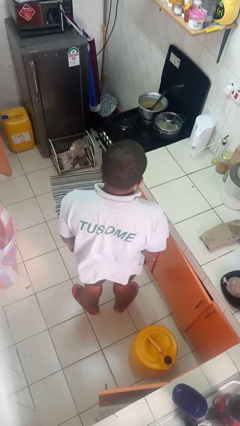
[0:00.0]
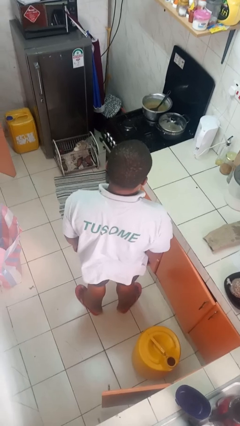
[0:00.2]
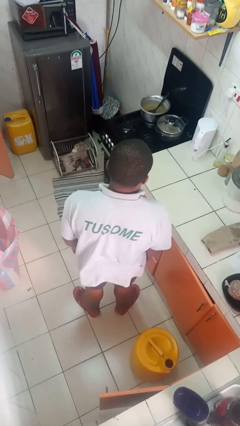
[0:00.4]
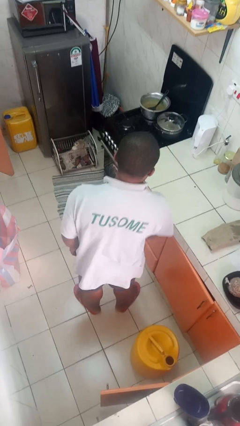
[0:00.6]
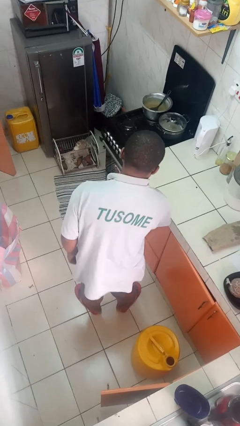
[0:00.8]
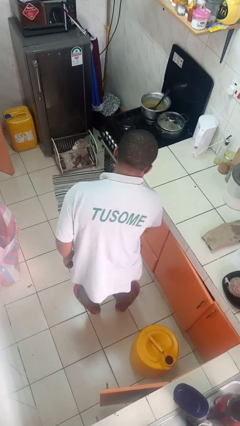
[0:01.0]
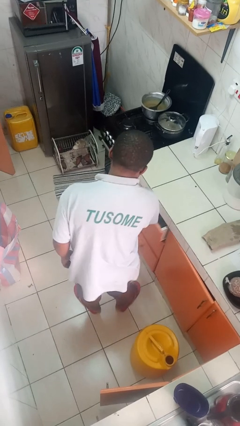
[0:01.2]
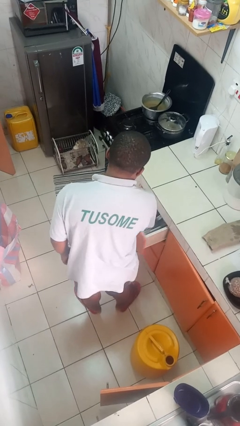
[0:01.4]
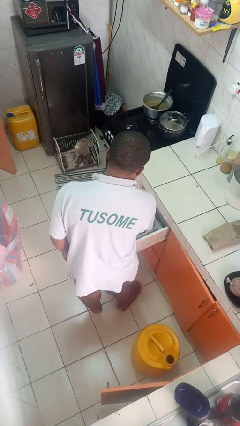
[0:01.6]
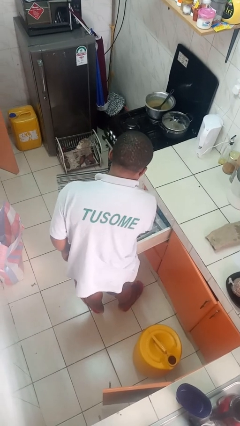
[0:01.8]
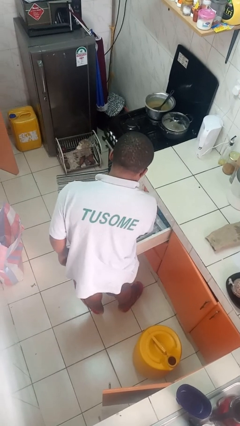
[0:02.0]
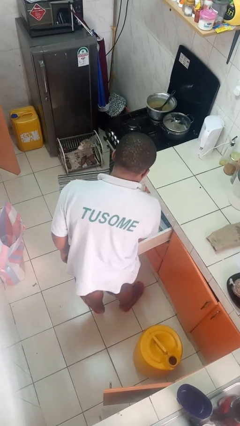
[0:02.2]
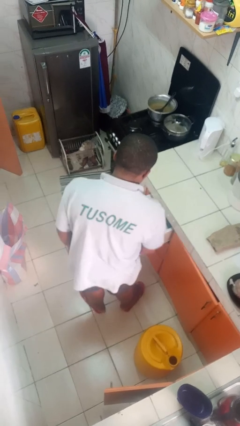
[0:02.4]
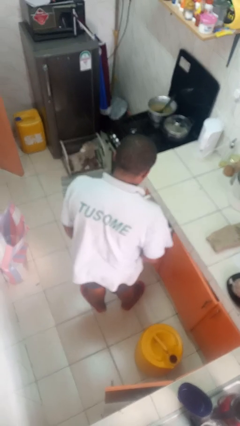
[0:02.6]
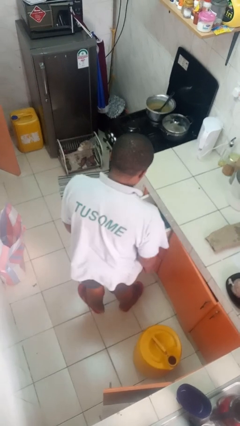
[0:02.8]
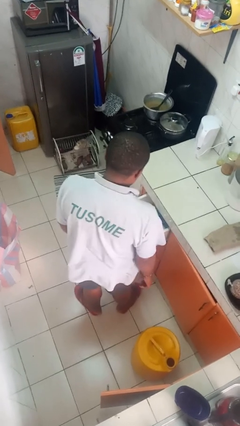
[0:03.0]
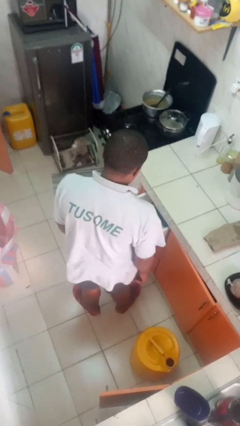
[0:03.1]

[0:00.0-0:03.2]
person opens kitchen drawer

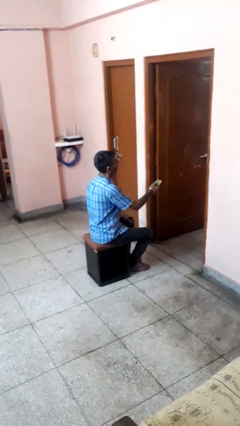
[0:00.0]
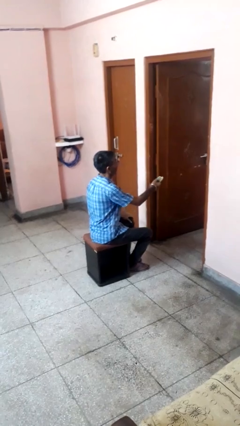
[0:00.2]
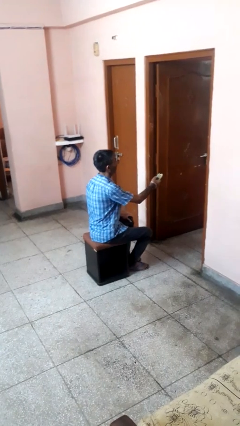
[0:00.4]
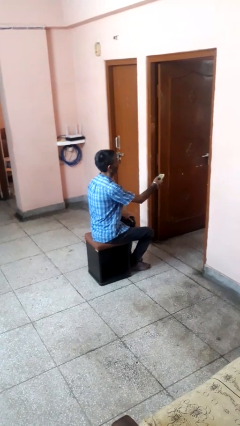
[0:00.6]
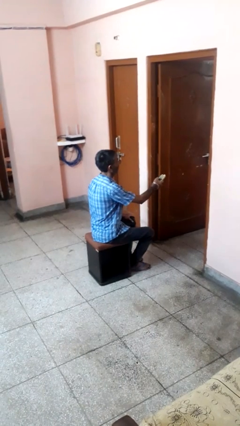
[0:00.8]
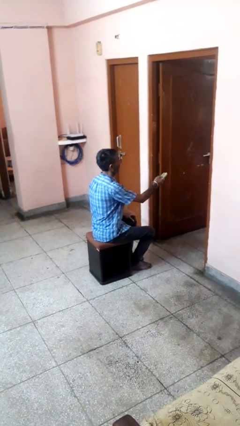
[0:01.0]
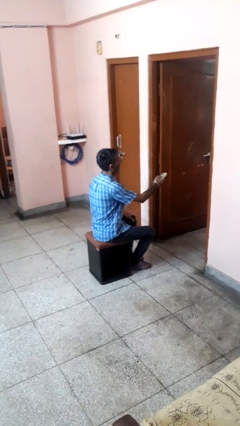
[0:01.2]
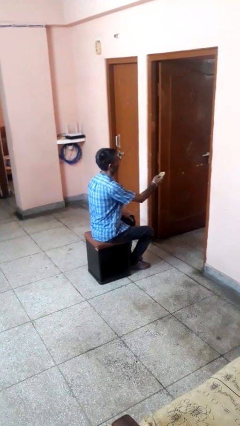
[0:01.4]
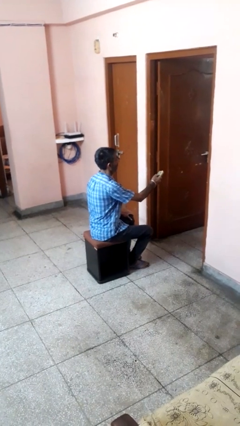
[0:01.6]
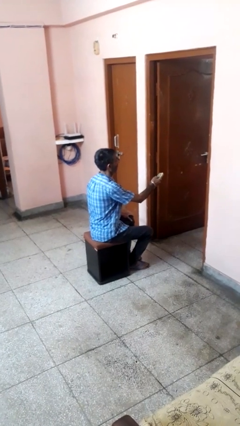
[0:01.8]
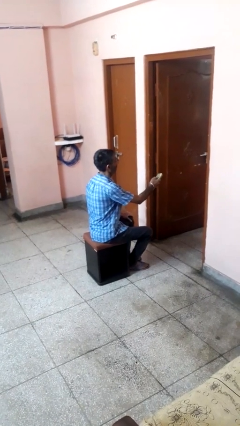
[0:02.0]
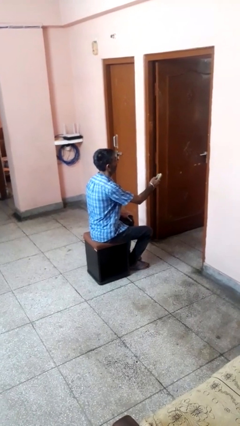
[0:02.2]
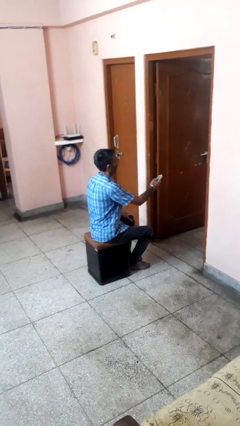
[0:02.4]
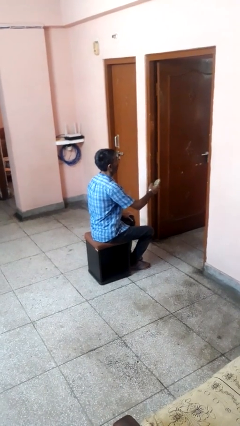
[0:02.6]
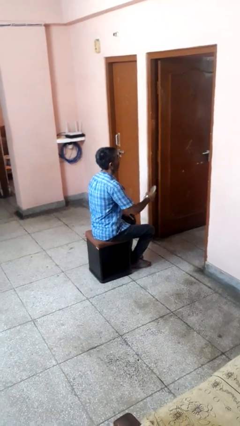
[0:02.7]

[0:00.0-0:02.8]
person uses television remote

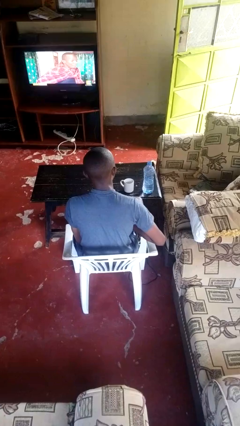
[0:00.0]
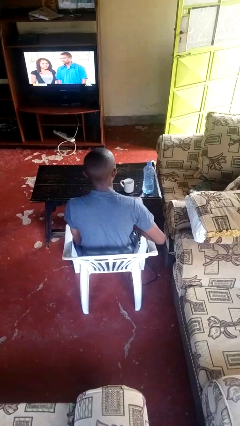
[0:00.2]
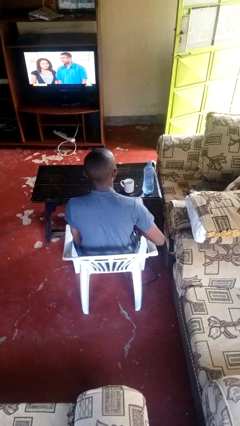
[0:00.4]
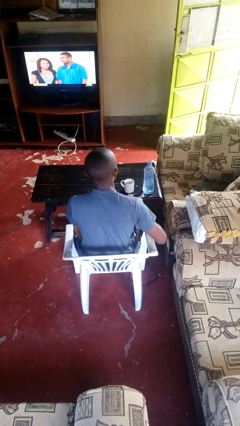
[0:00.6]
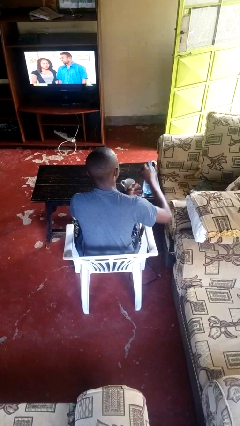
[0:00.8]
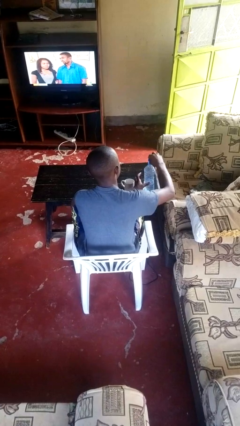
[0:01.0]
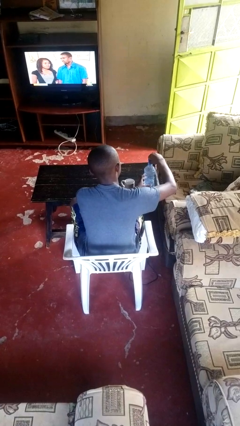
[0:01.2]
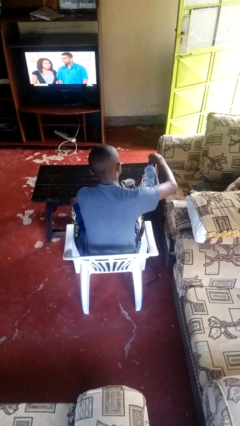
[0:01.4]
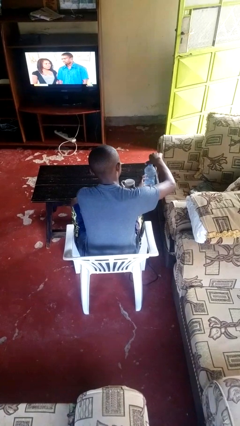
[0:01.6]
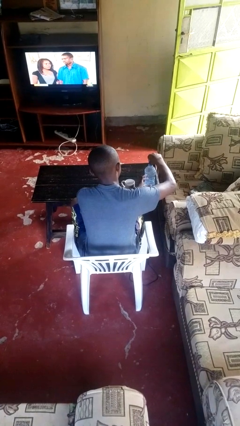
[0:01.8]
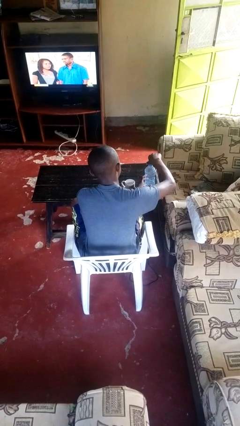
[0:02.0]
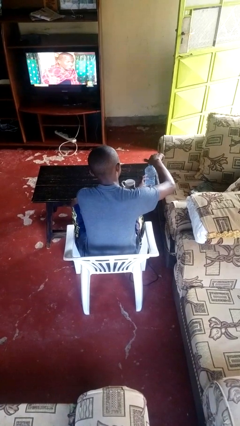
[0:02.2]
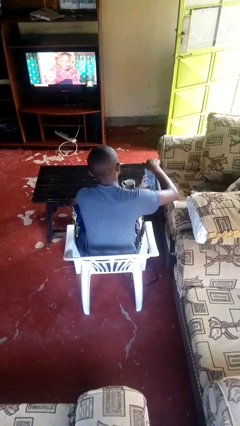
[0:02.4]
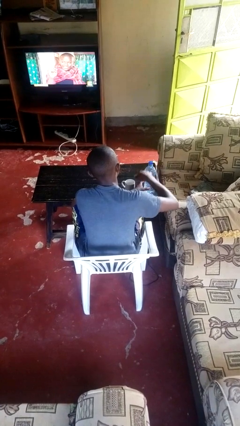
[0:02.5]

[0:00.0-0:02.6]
person screws lid to bottle

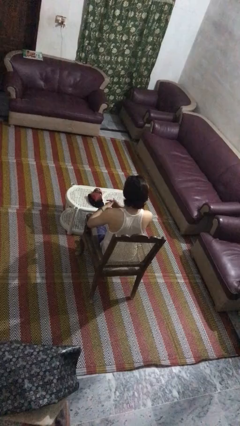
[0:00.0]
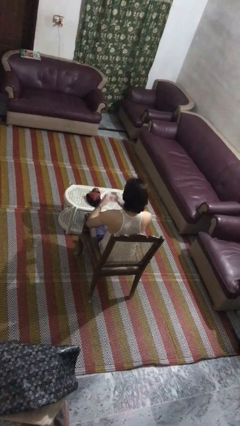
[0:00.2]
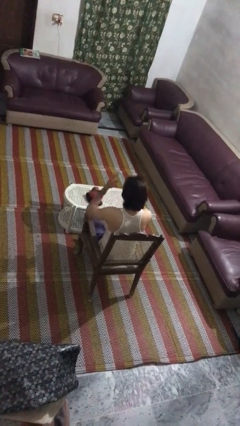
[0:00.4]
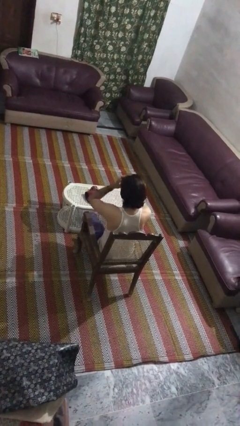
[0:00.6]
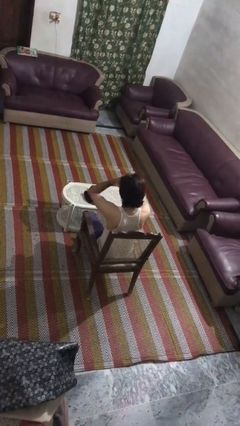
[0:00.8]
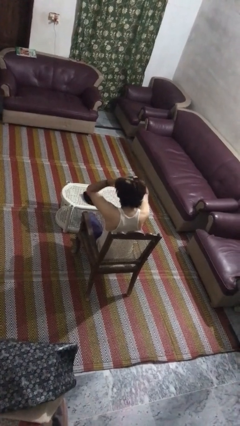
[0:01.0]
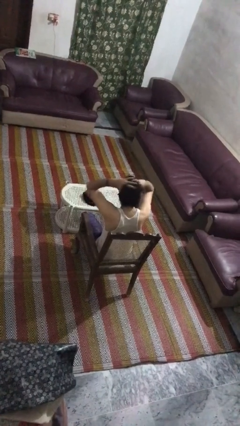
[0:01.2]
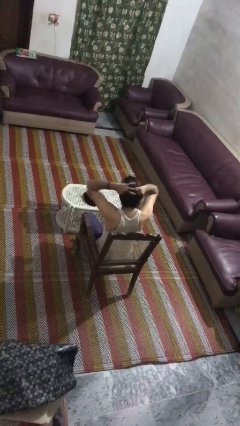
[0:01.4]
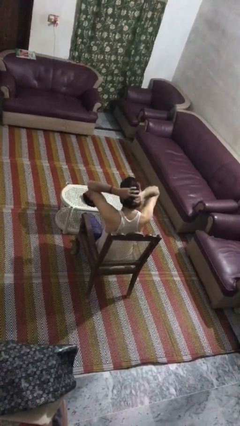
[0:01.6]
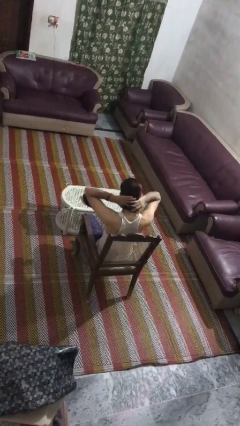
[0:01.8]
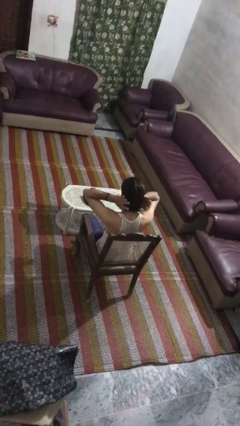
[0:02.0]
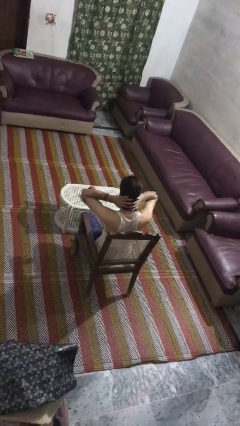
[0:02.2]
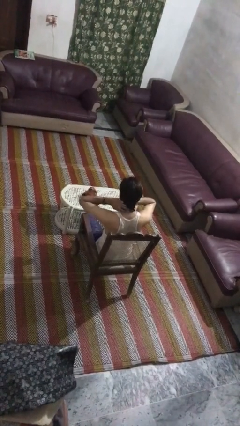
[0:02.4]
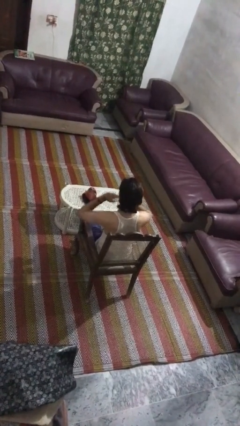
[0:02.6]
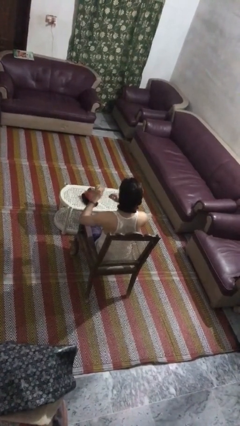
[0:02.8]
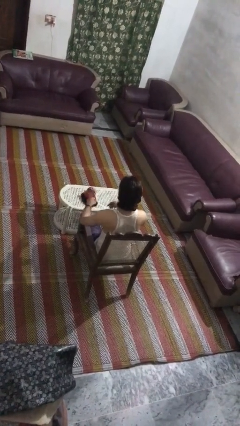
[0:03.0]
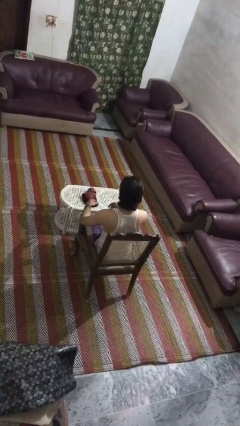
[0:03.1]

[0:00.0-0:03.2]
person strokes hair

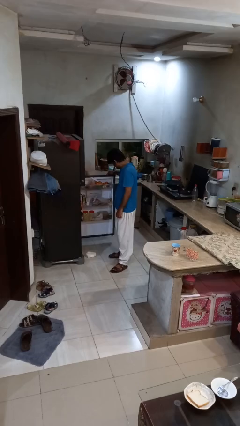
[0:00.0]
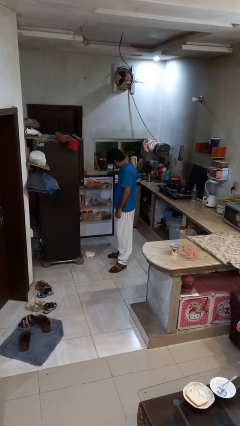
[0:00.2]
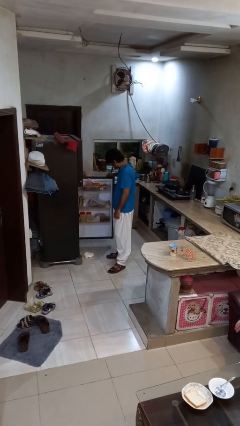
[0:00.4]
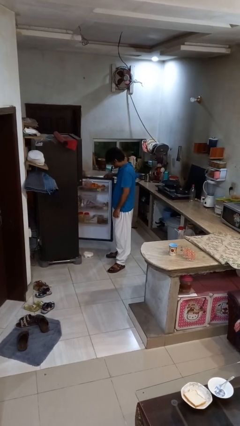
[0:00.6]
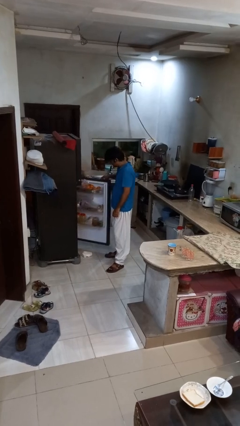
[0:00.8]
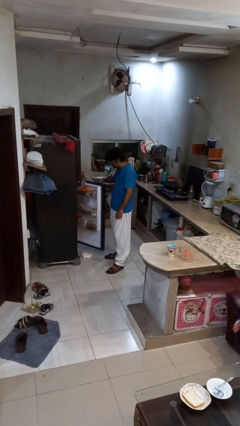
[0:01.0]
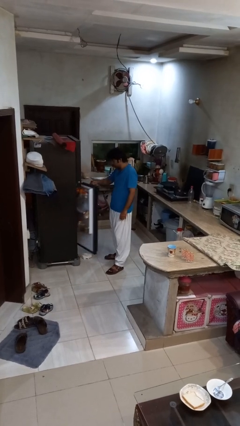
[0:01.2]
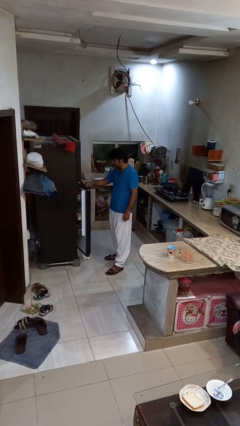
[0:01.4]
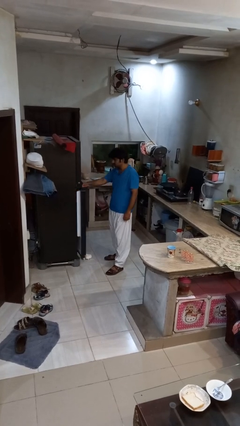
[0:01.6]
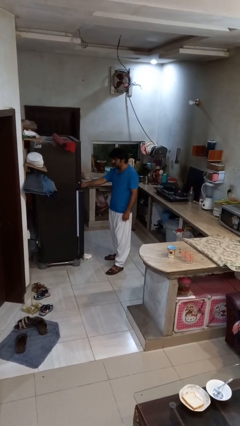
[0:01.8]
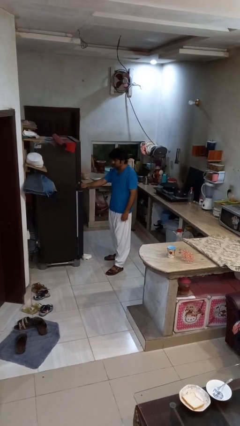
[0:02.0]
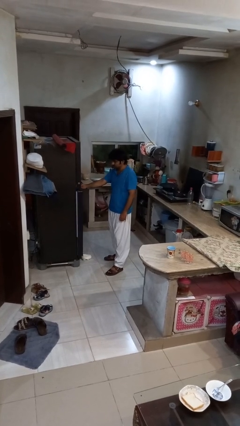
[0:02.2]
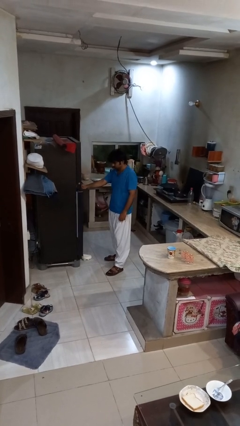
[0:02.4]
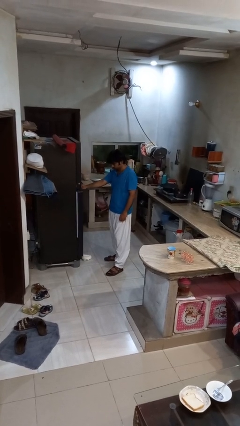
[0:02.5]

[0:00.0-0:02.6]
person closes refrigerator

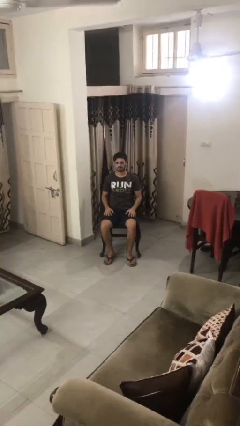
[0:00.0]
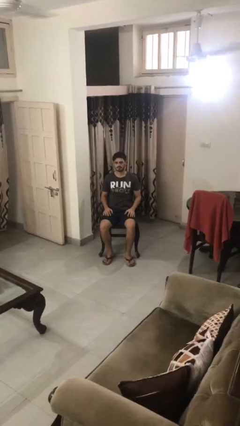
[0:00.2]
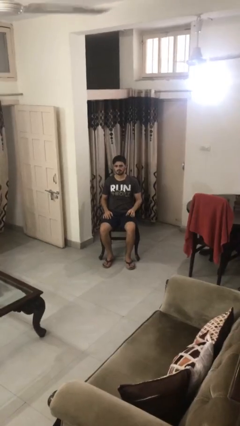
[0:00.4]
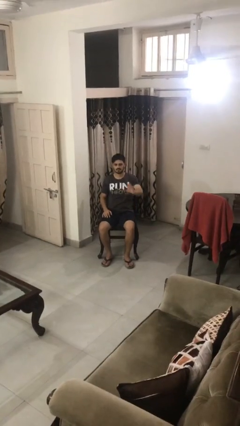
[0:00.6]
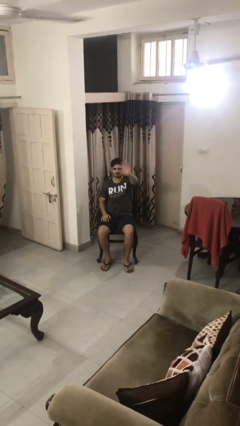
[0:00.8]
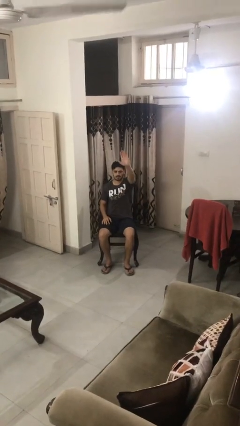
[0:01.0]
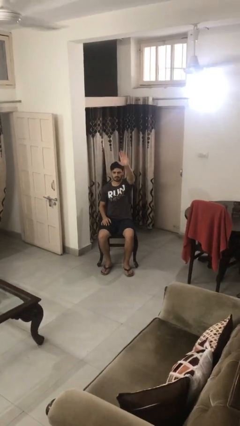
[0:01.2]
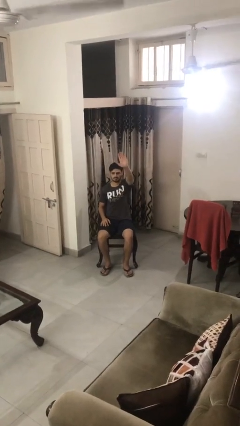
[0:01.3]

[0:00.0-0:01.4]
person gestures raise hand

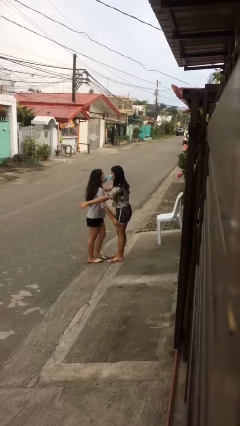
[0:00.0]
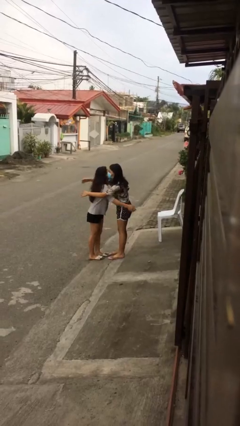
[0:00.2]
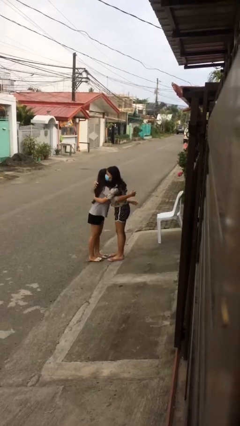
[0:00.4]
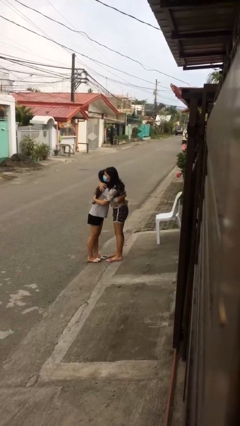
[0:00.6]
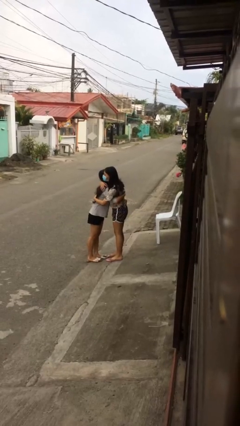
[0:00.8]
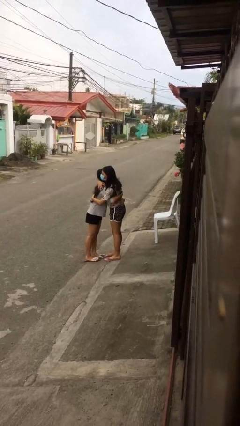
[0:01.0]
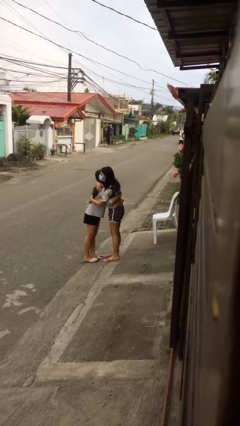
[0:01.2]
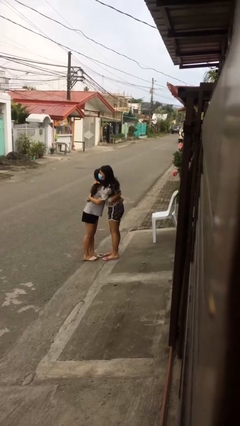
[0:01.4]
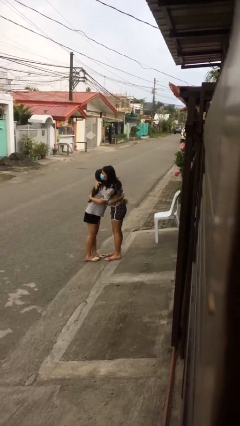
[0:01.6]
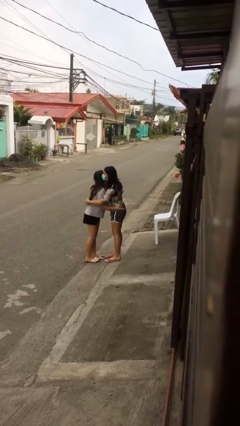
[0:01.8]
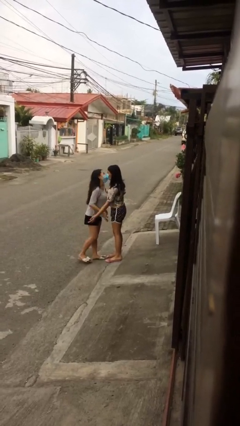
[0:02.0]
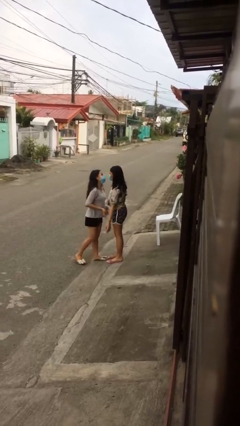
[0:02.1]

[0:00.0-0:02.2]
person embraces person
